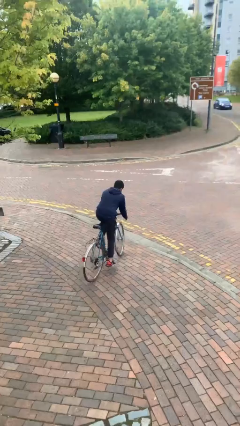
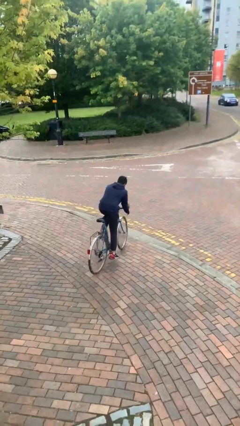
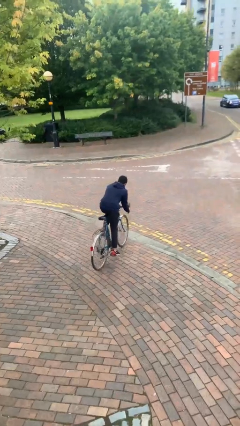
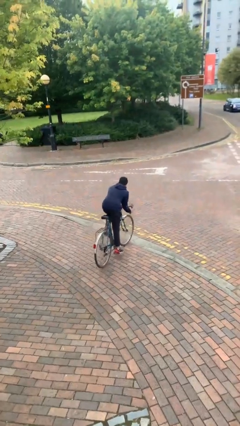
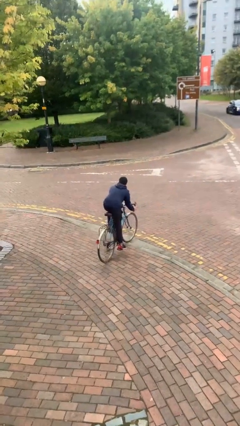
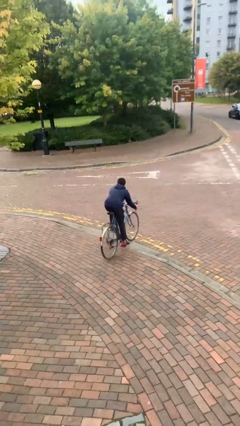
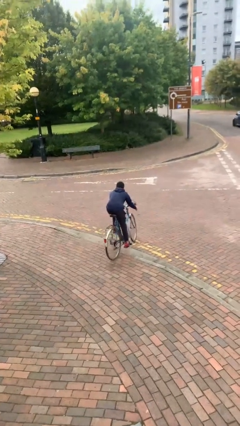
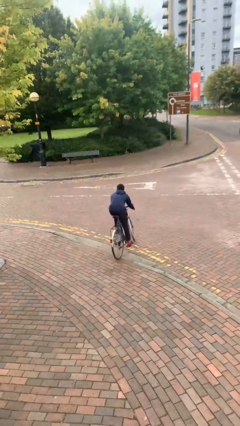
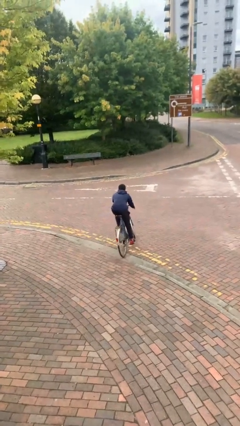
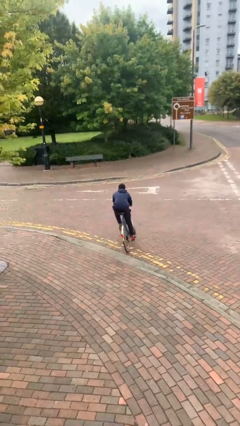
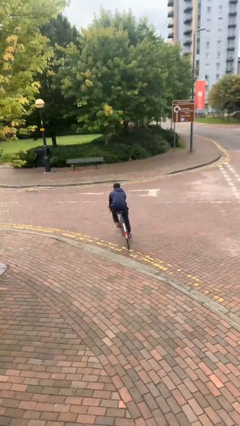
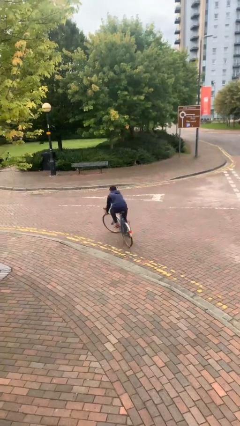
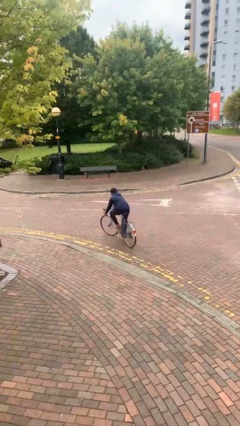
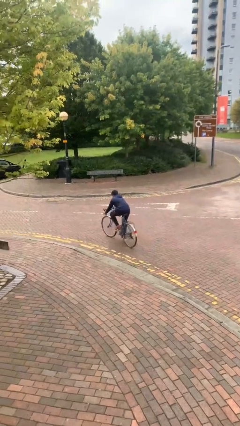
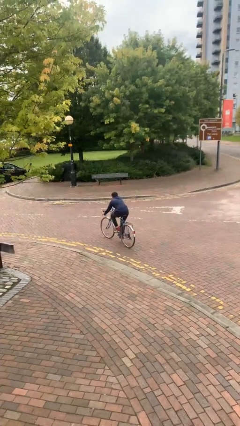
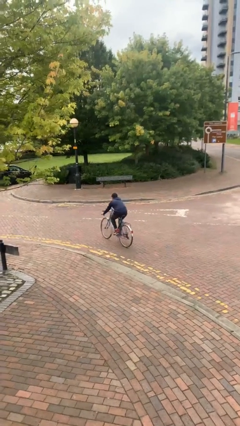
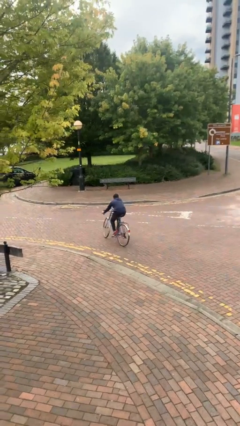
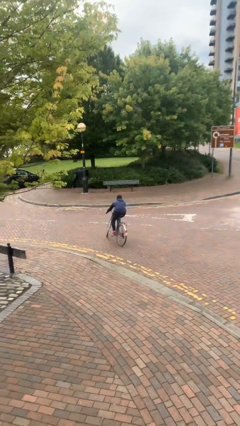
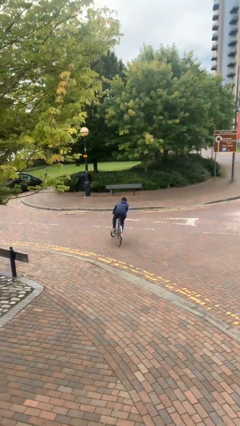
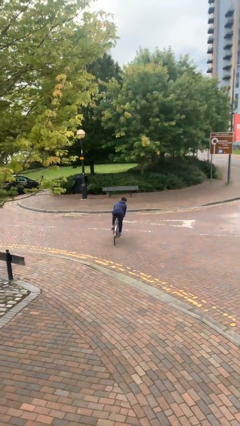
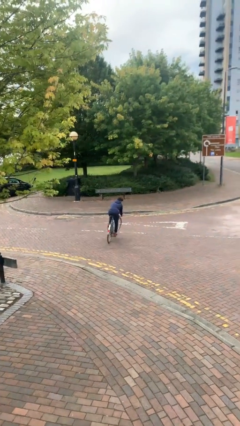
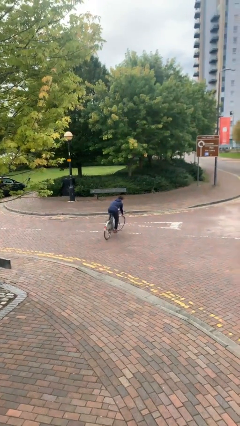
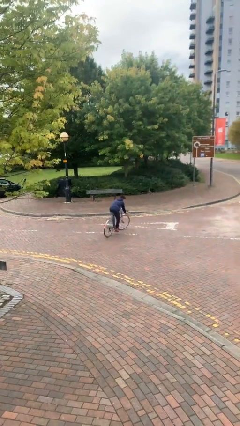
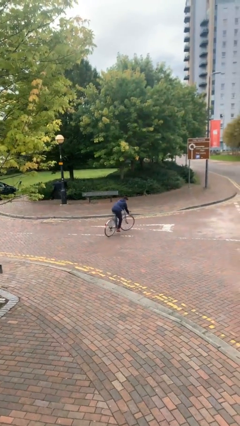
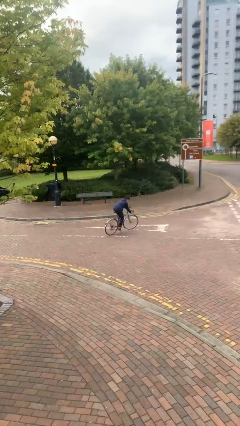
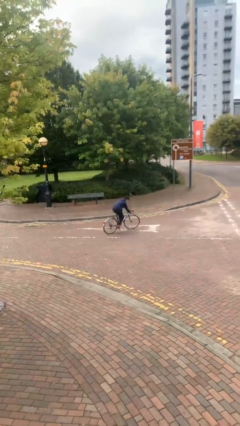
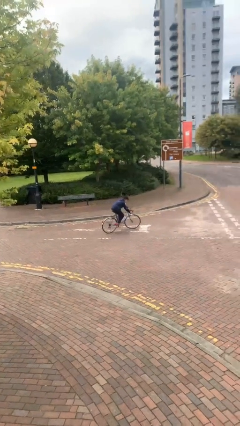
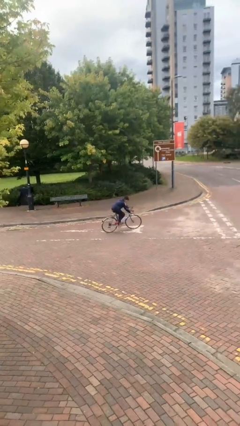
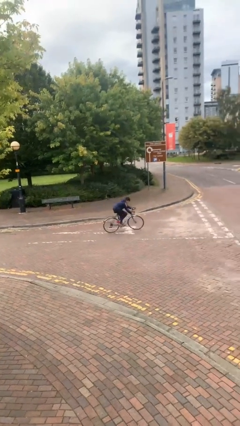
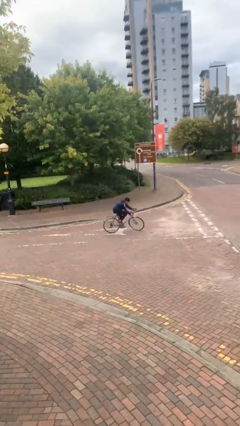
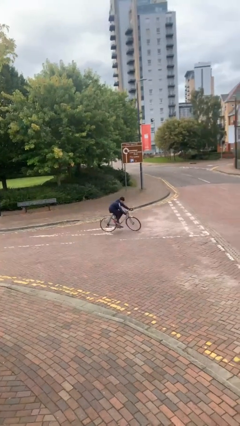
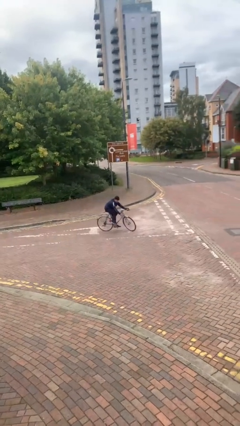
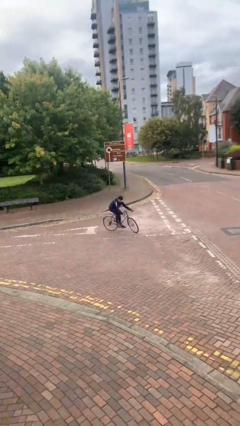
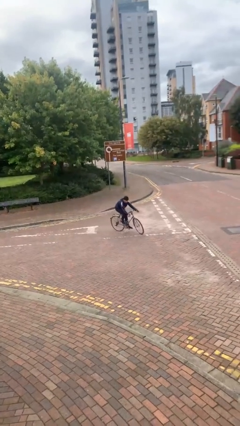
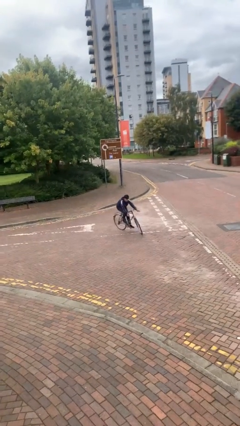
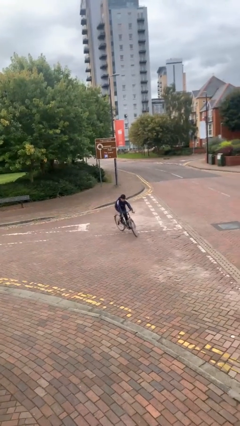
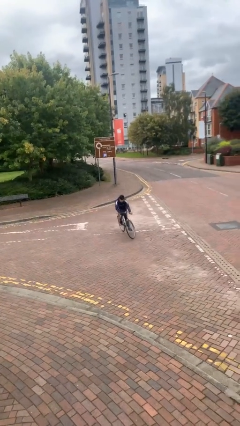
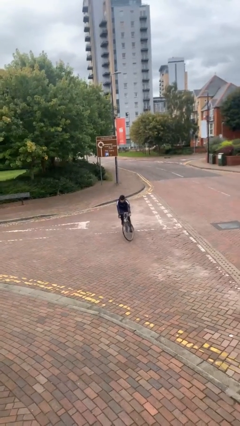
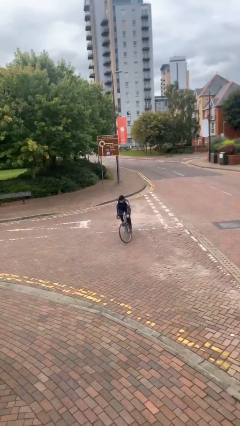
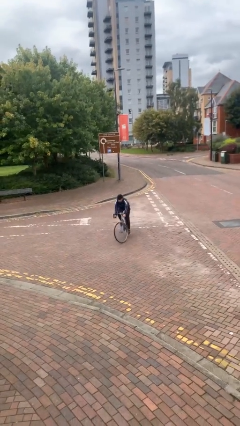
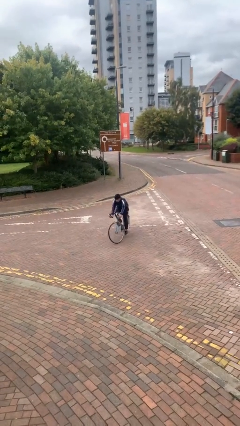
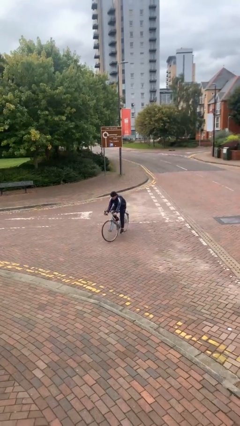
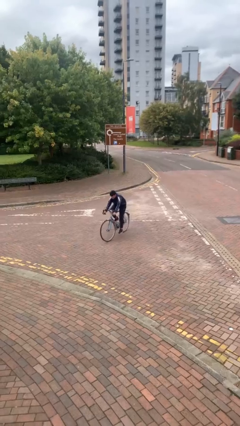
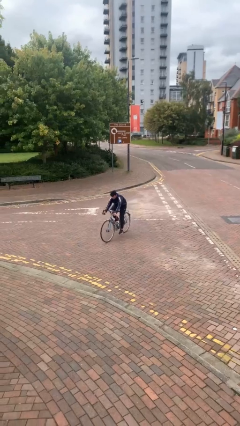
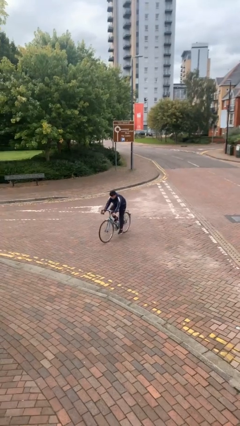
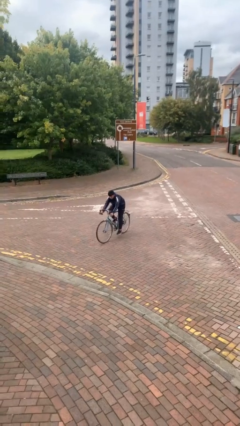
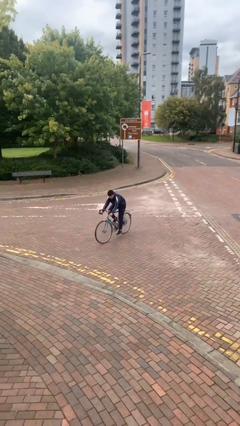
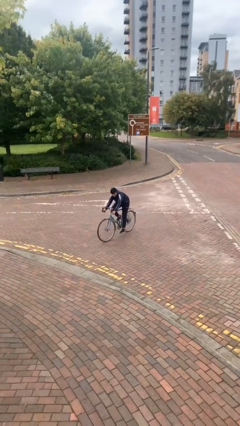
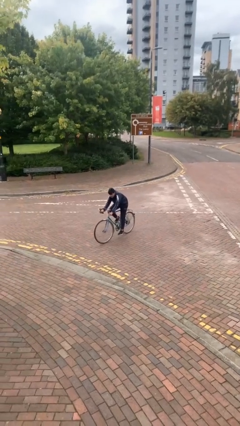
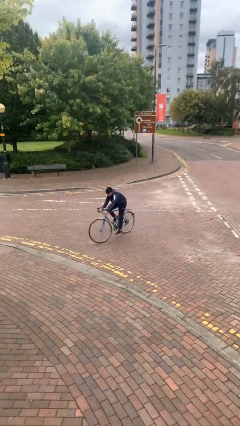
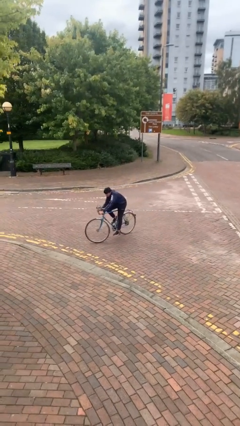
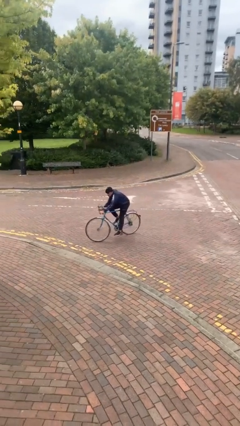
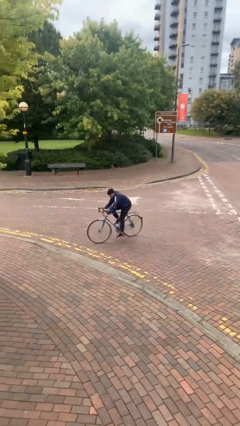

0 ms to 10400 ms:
person rides bicycle

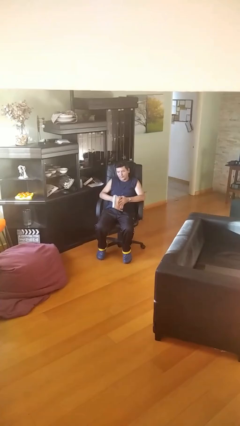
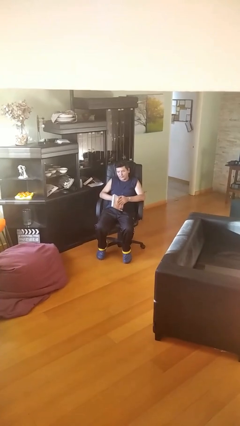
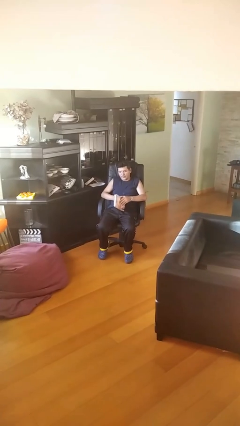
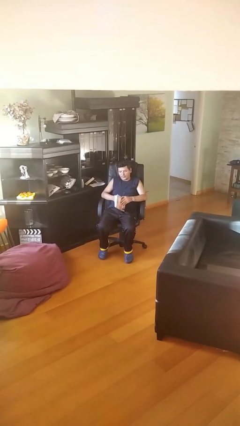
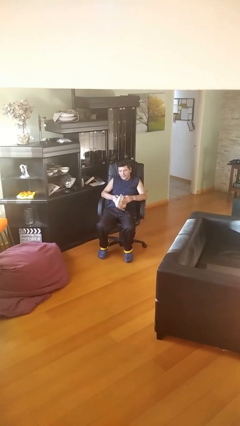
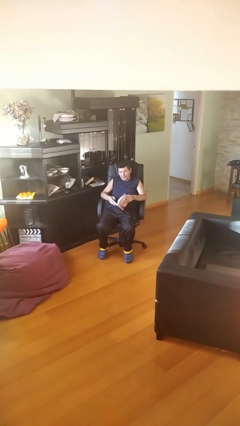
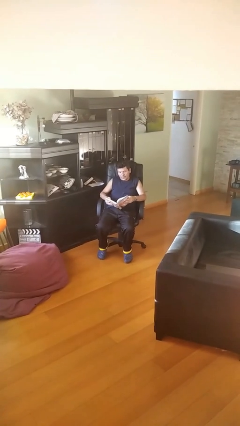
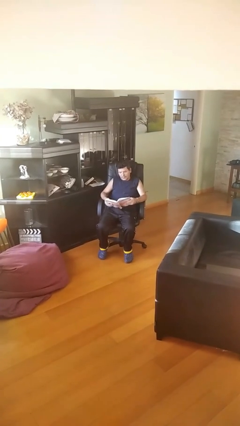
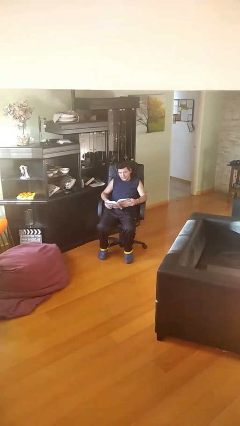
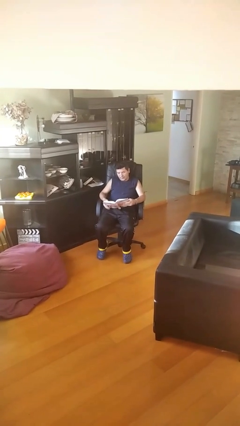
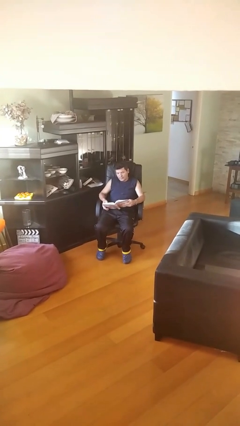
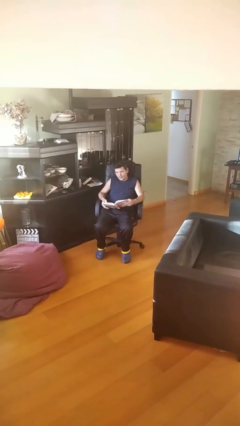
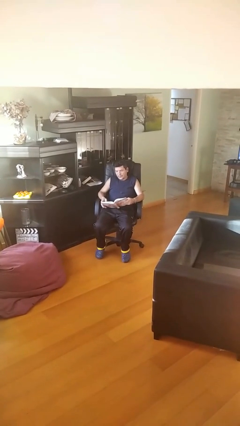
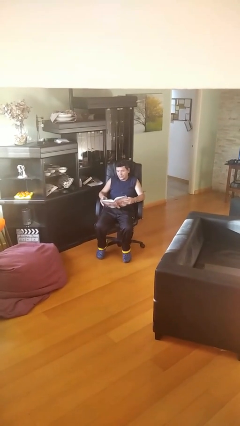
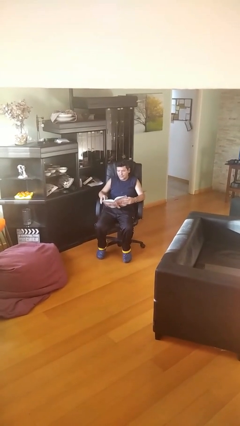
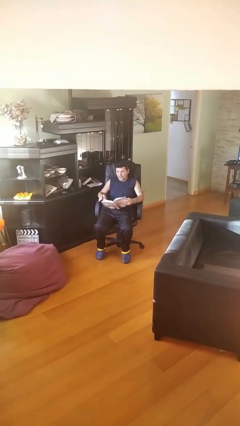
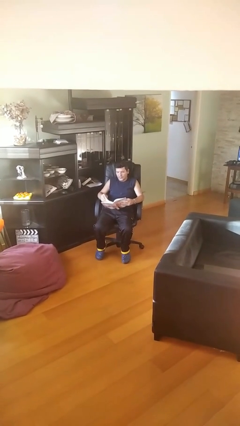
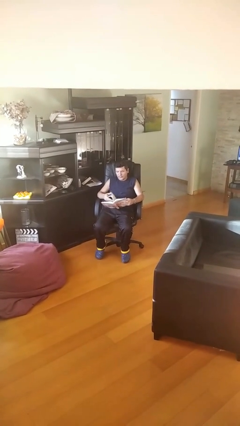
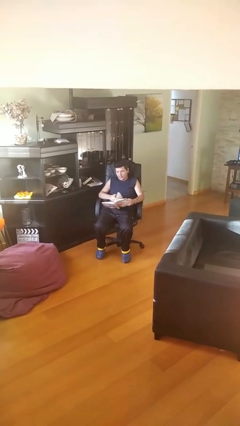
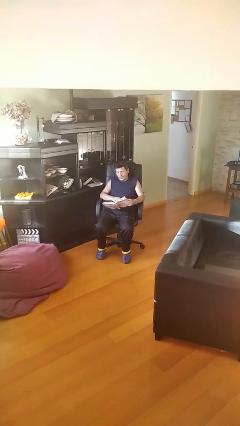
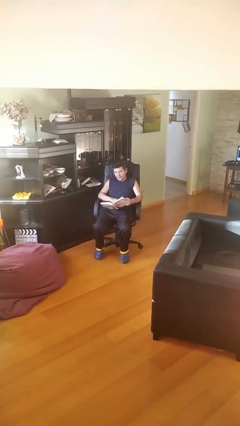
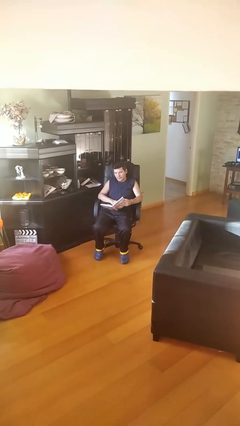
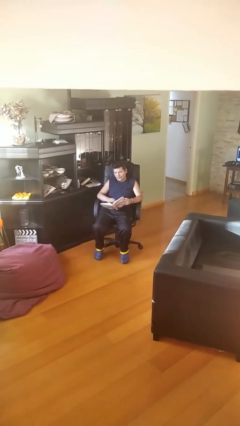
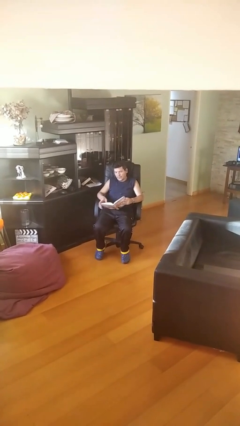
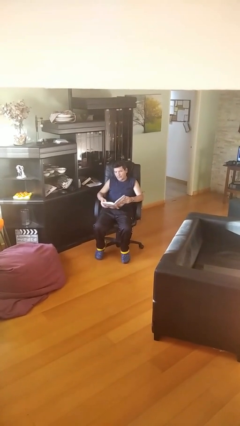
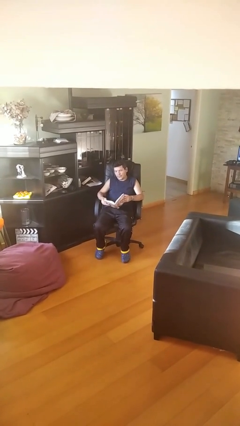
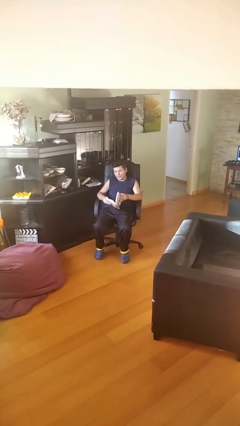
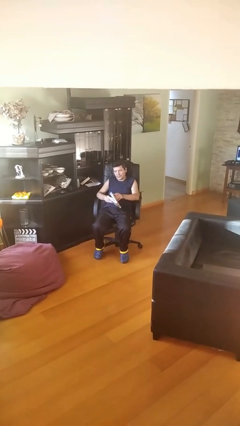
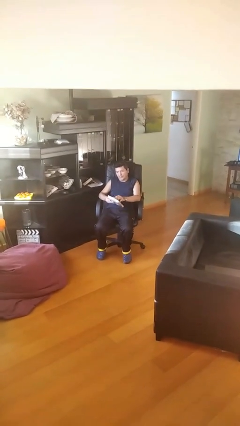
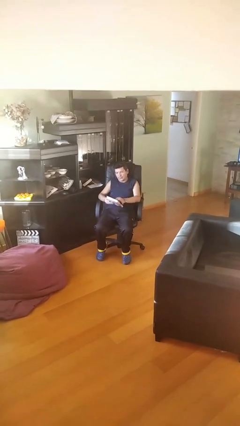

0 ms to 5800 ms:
person reads document

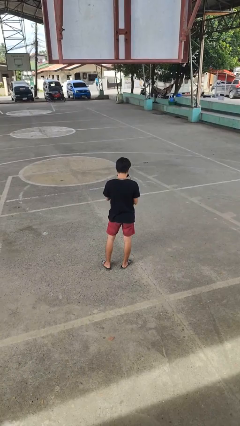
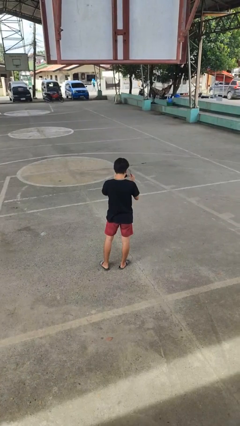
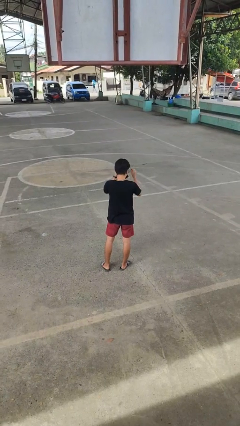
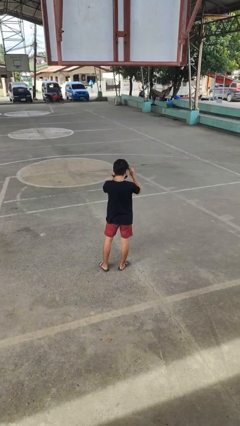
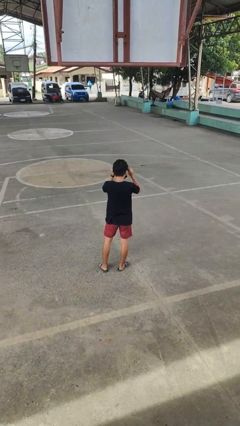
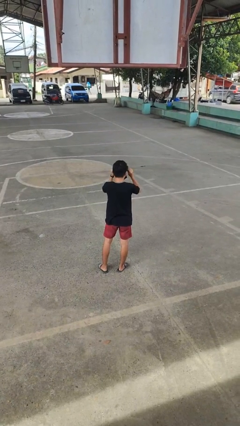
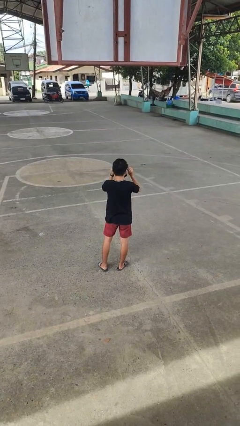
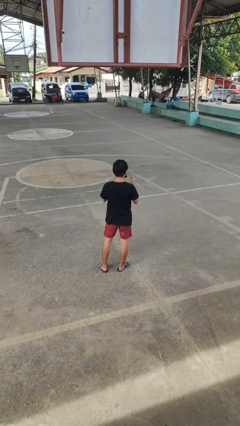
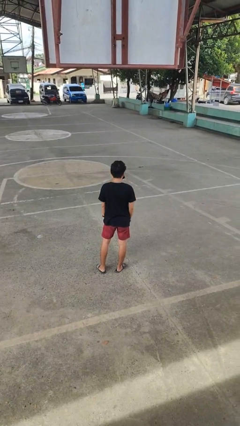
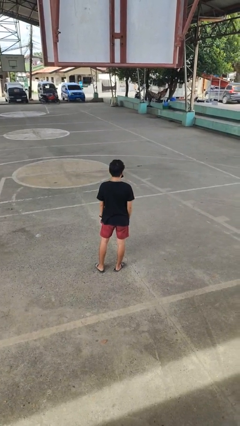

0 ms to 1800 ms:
person puts on glasses
